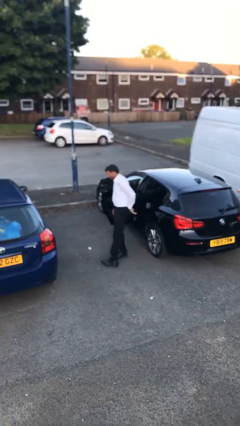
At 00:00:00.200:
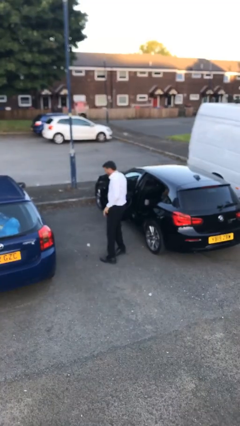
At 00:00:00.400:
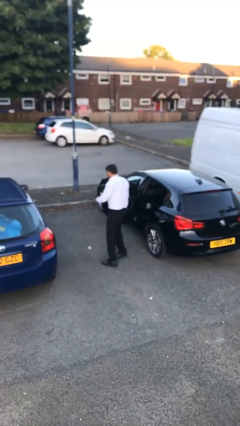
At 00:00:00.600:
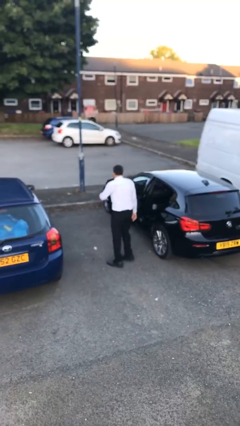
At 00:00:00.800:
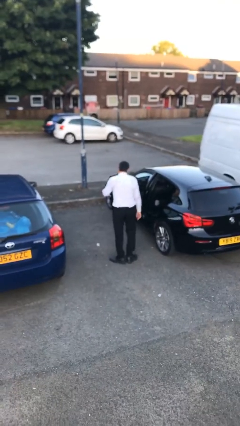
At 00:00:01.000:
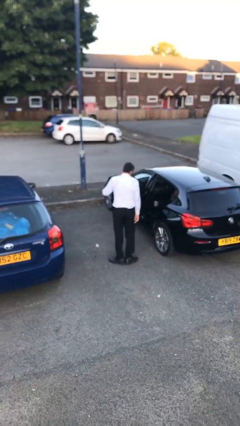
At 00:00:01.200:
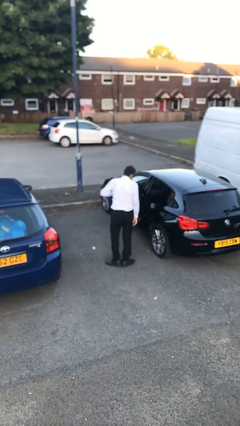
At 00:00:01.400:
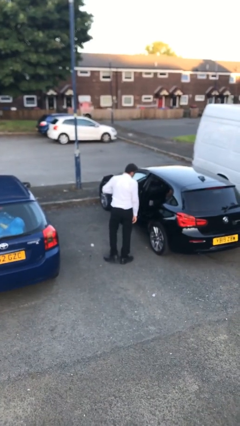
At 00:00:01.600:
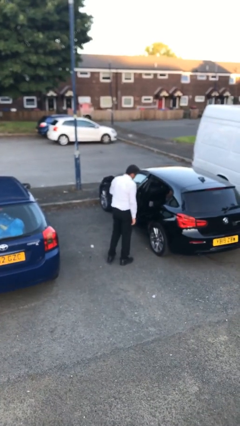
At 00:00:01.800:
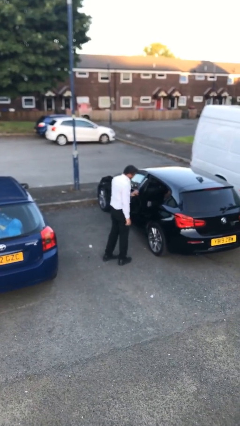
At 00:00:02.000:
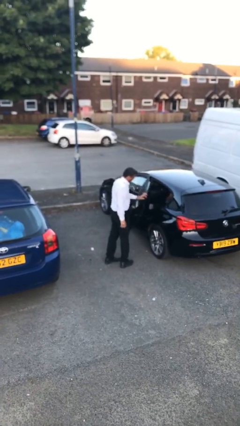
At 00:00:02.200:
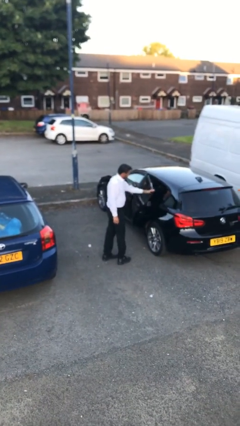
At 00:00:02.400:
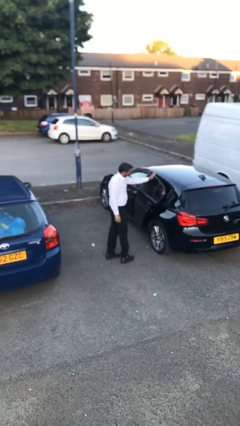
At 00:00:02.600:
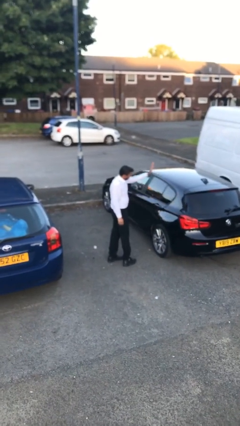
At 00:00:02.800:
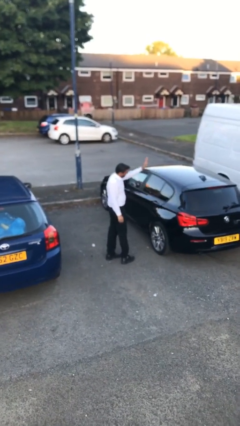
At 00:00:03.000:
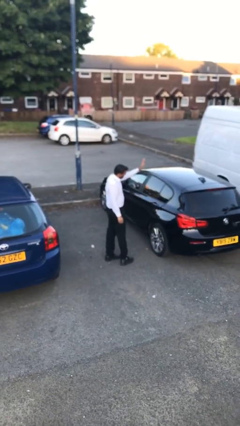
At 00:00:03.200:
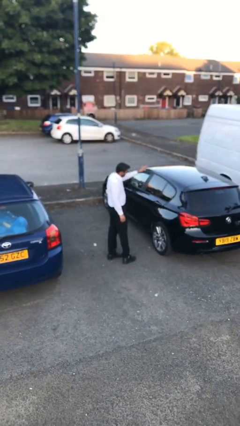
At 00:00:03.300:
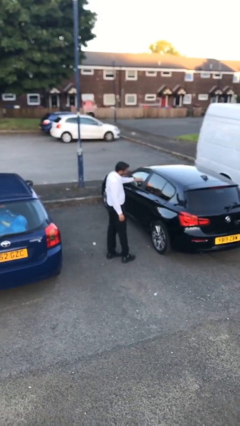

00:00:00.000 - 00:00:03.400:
person closes car door

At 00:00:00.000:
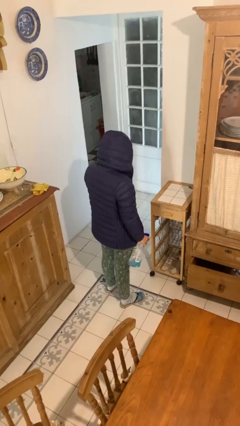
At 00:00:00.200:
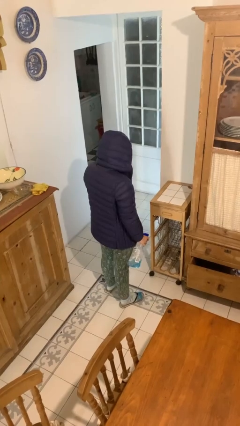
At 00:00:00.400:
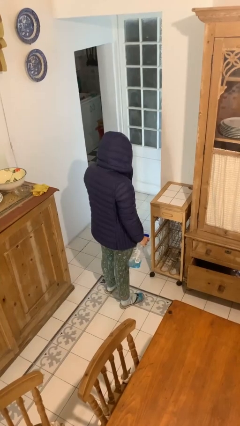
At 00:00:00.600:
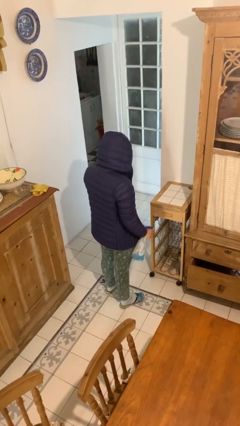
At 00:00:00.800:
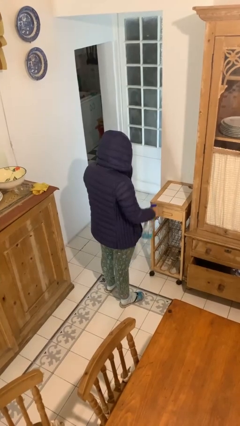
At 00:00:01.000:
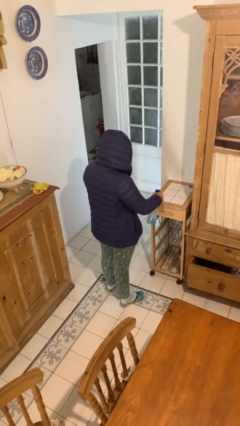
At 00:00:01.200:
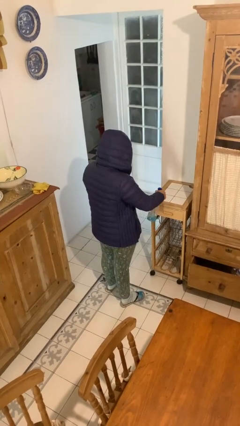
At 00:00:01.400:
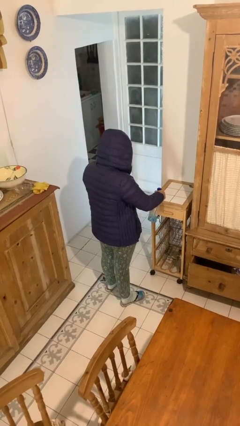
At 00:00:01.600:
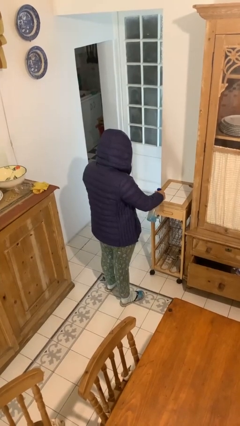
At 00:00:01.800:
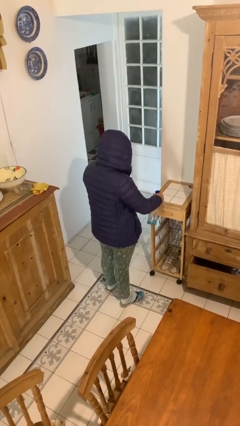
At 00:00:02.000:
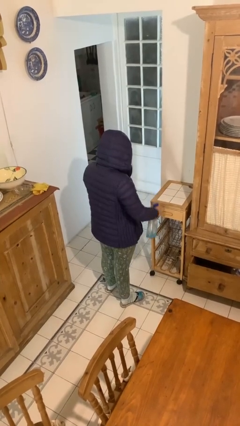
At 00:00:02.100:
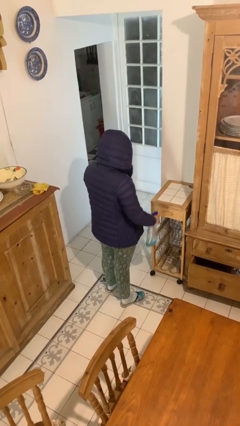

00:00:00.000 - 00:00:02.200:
person sprays from bottle

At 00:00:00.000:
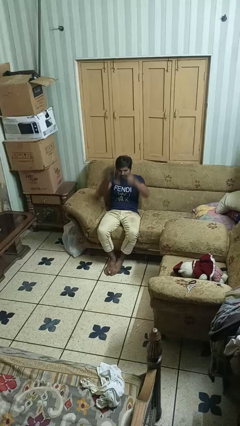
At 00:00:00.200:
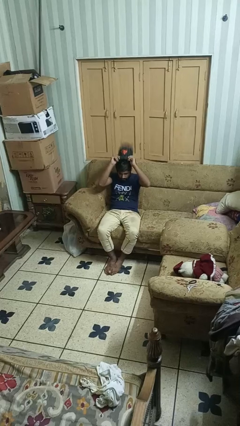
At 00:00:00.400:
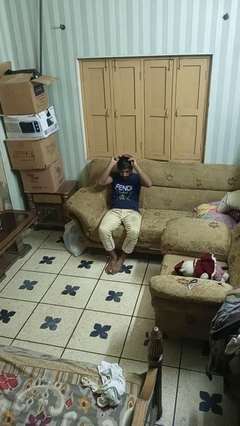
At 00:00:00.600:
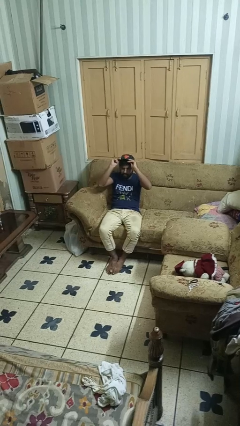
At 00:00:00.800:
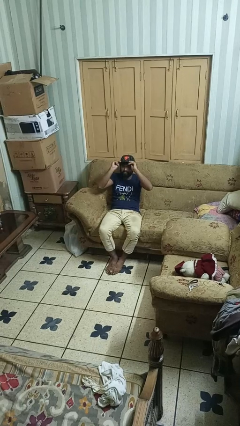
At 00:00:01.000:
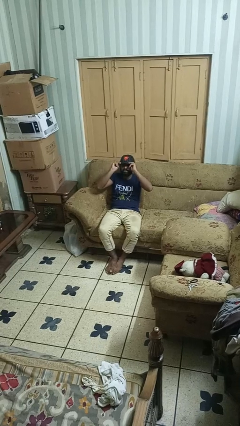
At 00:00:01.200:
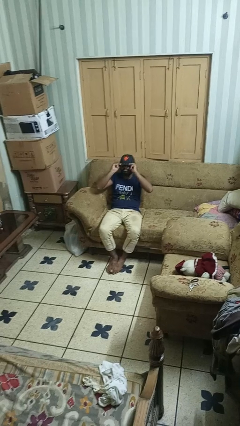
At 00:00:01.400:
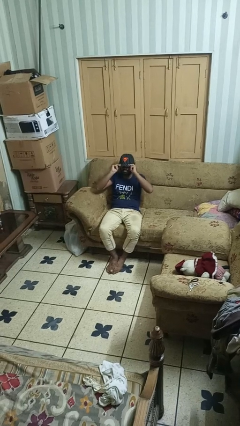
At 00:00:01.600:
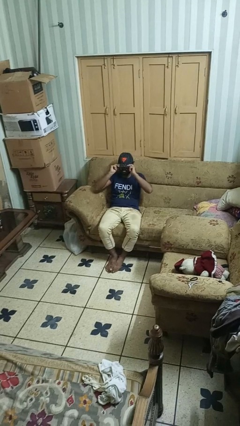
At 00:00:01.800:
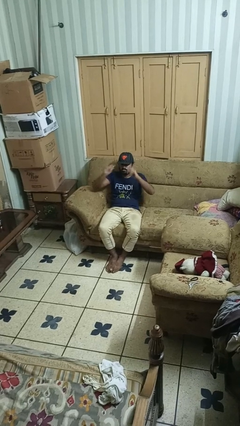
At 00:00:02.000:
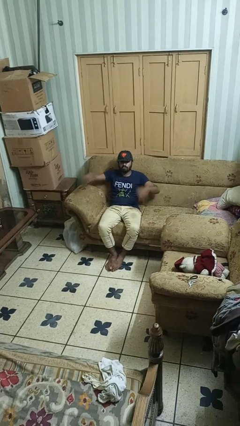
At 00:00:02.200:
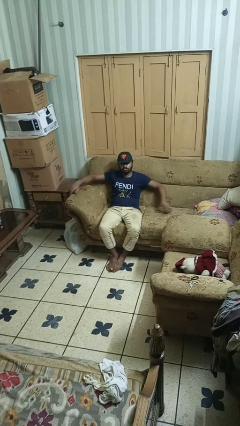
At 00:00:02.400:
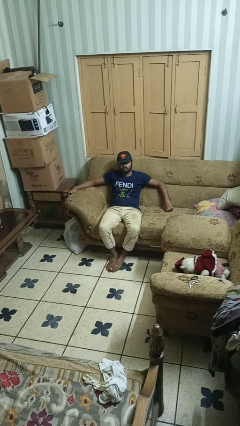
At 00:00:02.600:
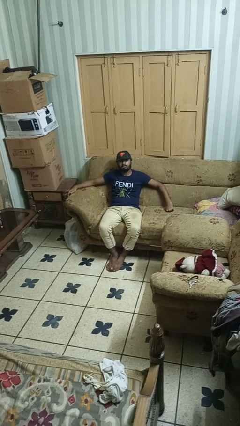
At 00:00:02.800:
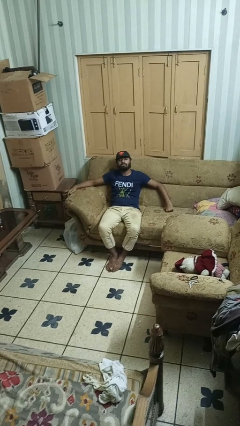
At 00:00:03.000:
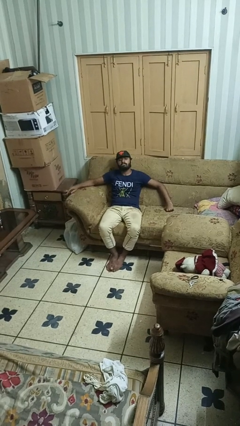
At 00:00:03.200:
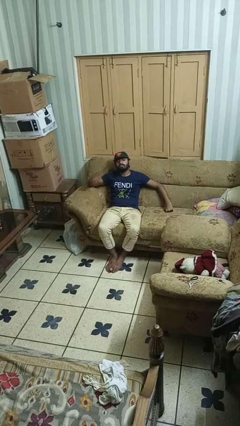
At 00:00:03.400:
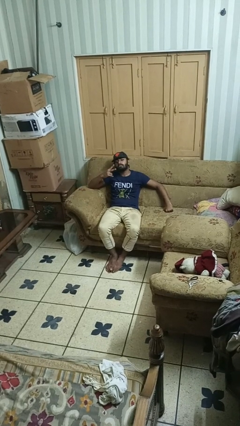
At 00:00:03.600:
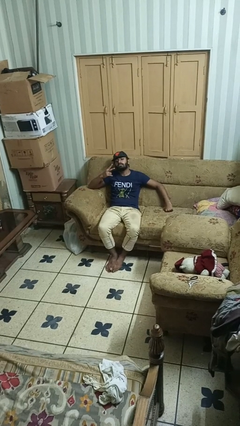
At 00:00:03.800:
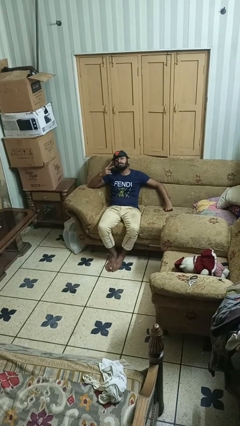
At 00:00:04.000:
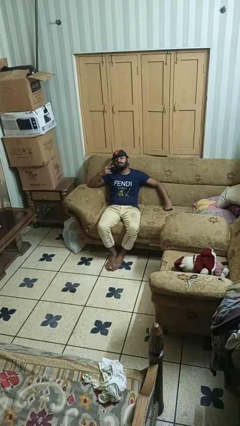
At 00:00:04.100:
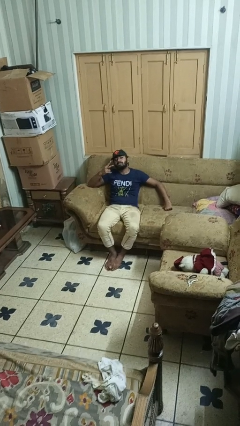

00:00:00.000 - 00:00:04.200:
person puts on hat

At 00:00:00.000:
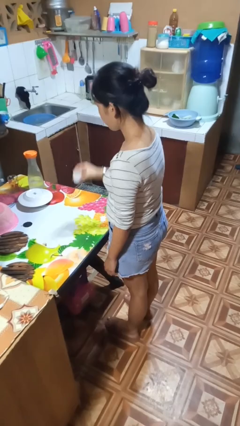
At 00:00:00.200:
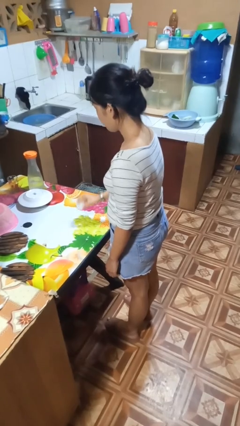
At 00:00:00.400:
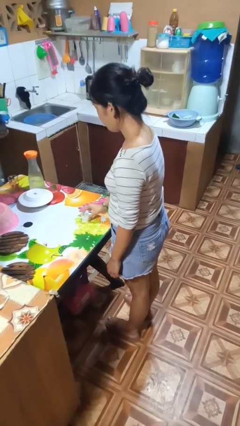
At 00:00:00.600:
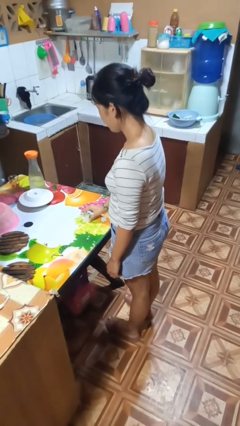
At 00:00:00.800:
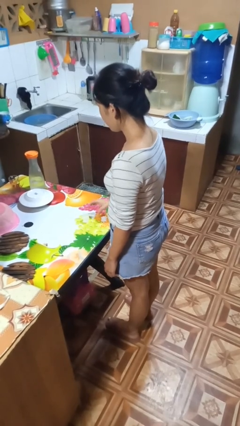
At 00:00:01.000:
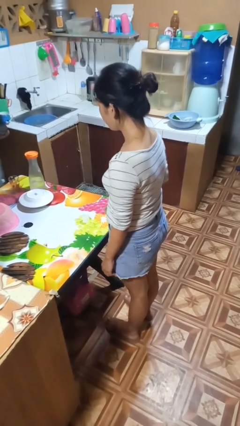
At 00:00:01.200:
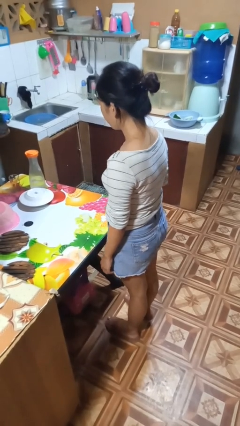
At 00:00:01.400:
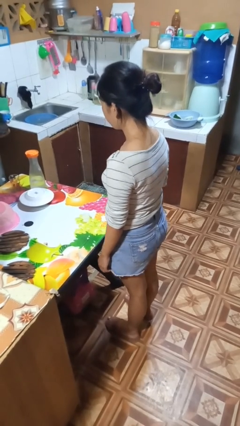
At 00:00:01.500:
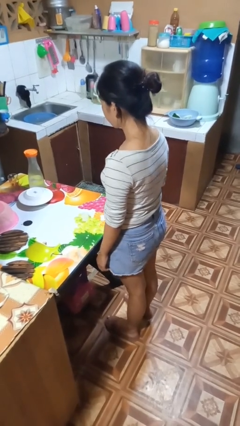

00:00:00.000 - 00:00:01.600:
person puts down object on table

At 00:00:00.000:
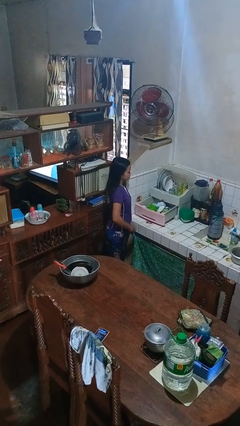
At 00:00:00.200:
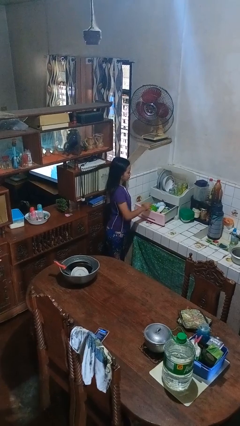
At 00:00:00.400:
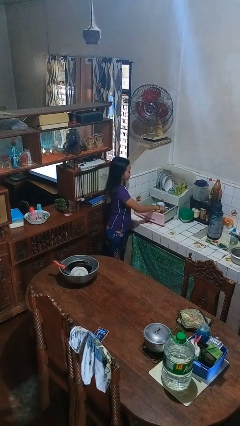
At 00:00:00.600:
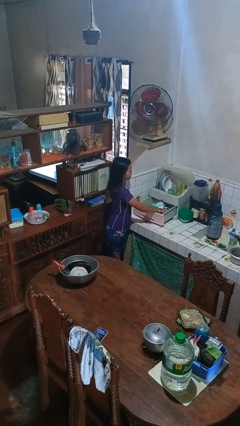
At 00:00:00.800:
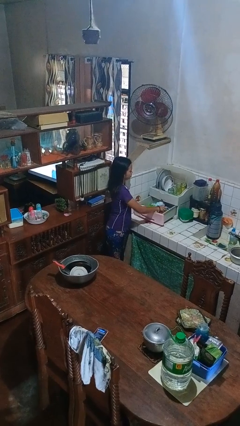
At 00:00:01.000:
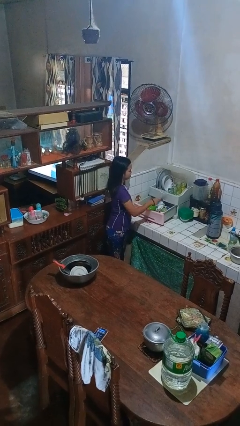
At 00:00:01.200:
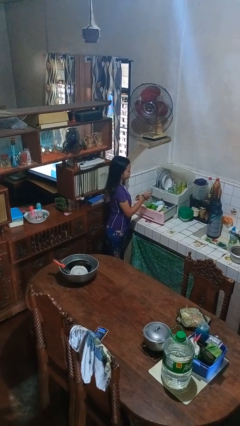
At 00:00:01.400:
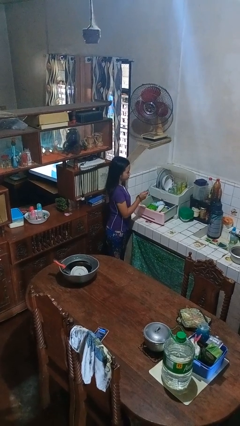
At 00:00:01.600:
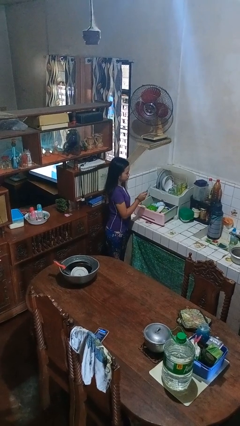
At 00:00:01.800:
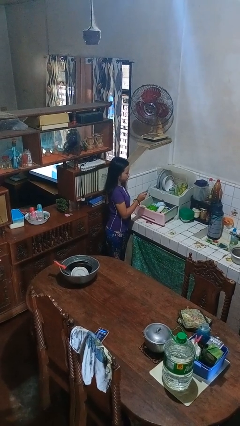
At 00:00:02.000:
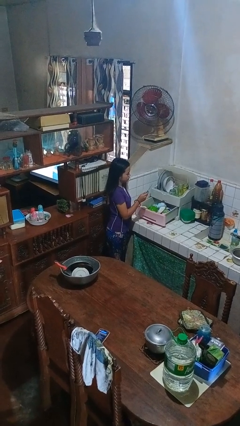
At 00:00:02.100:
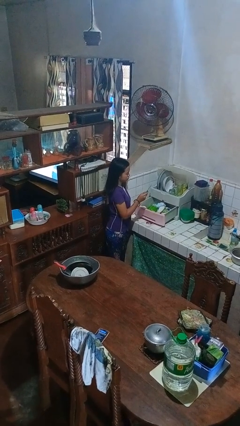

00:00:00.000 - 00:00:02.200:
person takes object from kitchen drawer

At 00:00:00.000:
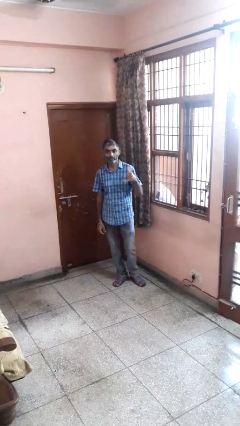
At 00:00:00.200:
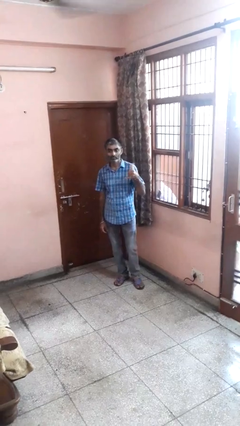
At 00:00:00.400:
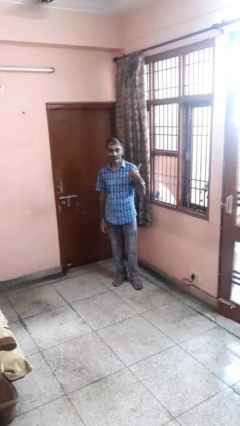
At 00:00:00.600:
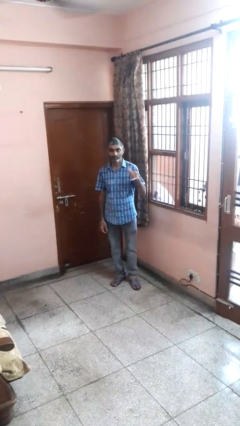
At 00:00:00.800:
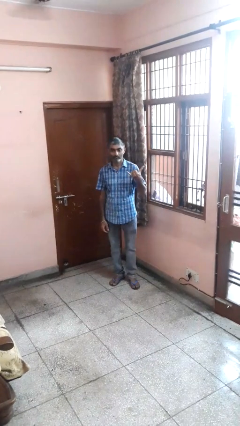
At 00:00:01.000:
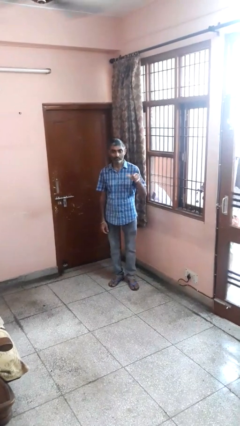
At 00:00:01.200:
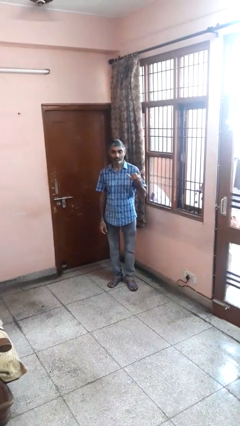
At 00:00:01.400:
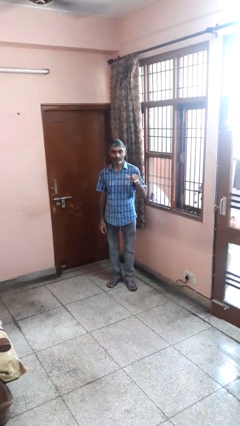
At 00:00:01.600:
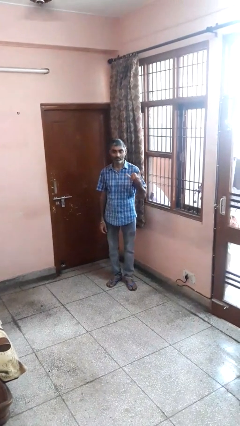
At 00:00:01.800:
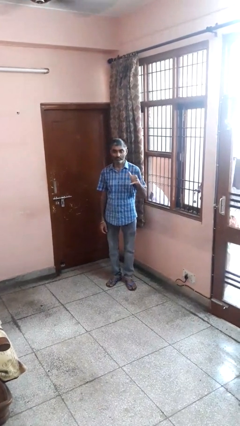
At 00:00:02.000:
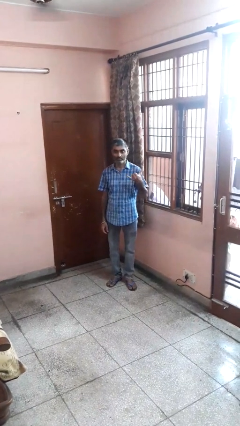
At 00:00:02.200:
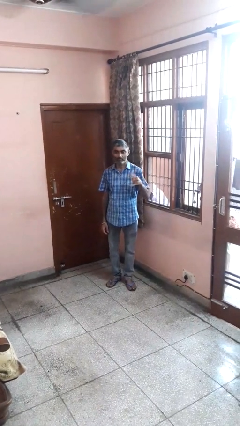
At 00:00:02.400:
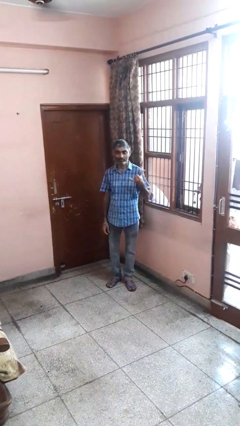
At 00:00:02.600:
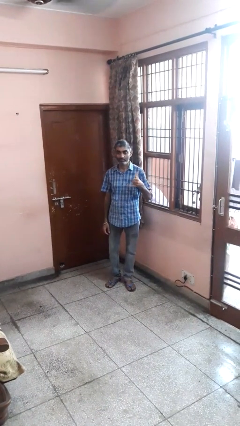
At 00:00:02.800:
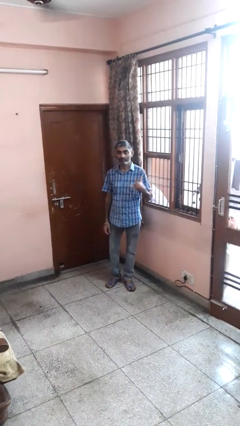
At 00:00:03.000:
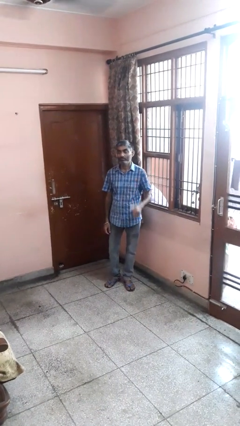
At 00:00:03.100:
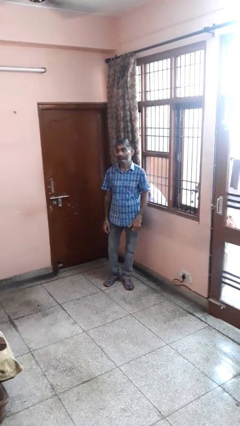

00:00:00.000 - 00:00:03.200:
person gestures hang loose
